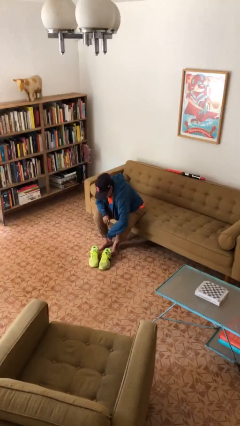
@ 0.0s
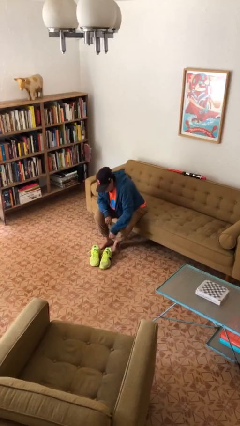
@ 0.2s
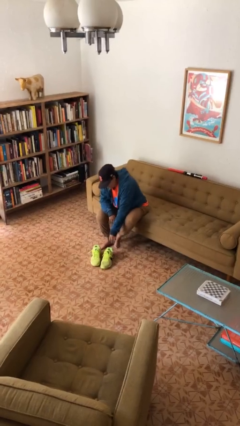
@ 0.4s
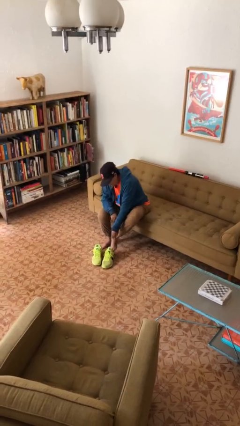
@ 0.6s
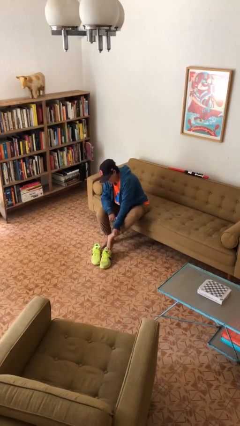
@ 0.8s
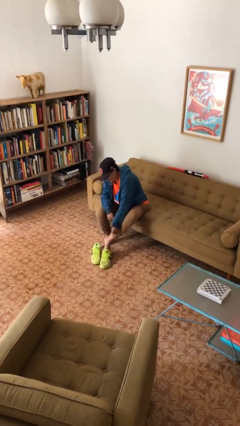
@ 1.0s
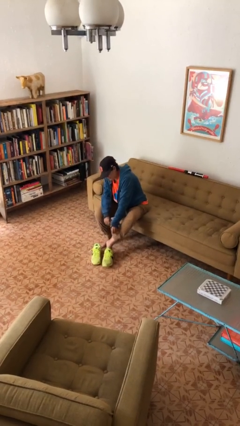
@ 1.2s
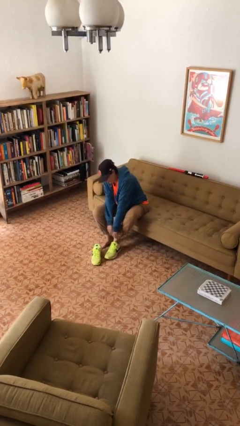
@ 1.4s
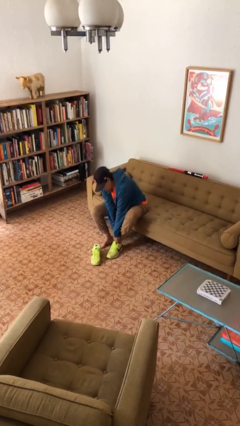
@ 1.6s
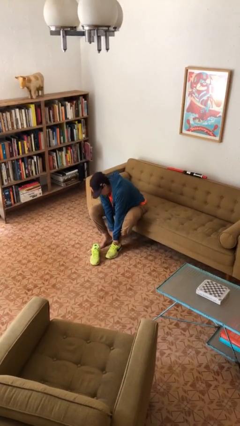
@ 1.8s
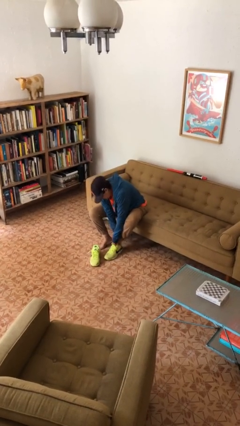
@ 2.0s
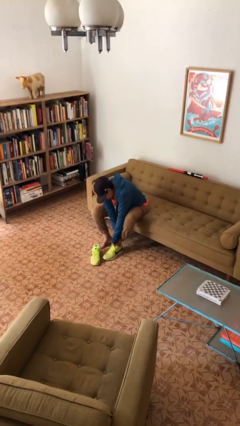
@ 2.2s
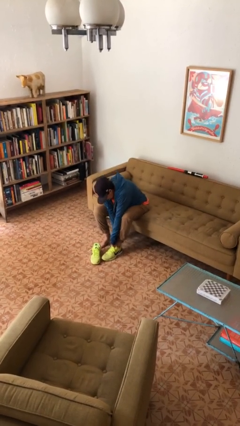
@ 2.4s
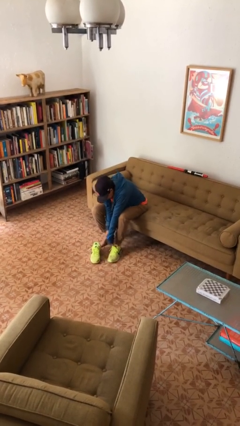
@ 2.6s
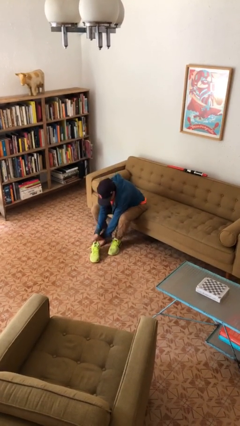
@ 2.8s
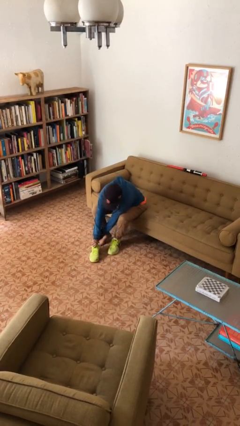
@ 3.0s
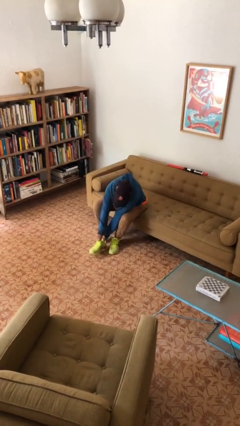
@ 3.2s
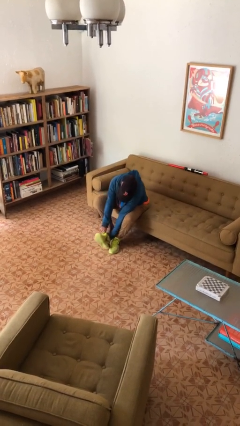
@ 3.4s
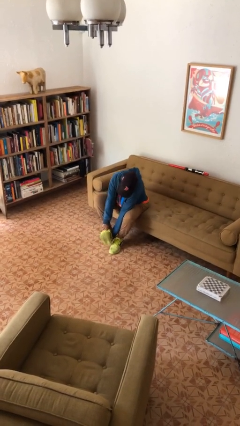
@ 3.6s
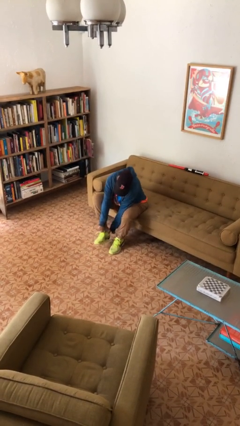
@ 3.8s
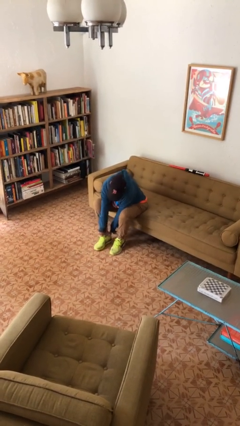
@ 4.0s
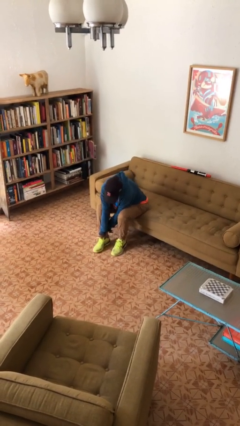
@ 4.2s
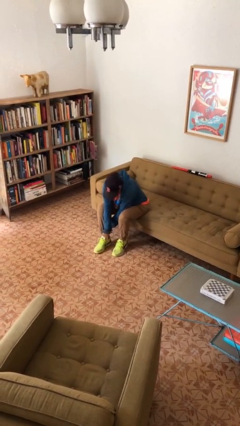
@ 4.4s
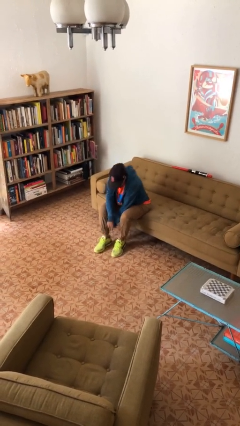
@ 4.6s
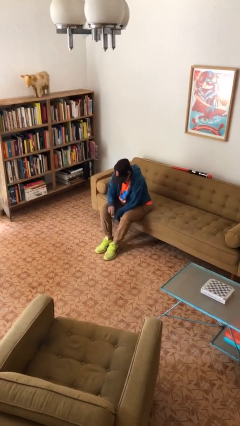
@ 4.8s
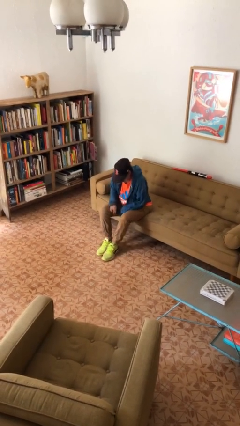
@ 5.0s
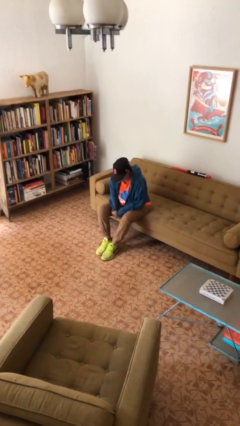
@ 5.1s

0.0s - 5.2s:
person puts on shoes

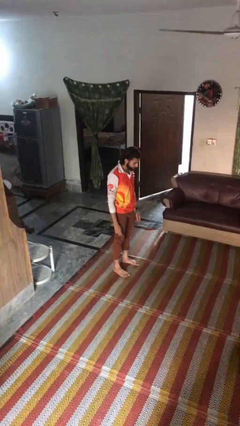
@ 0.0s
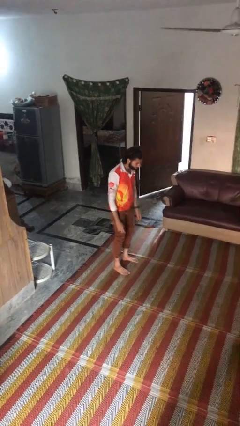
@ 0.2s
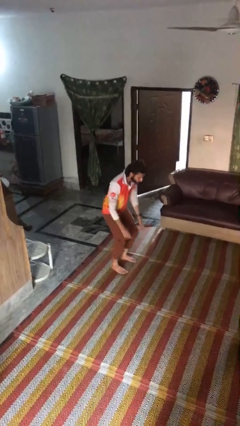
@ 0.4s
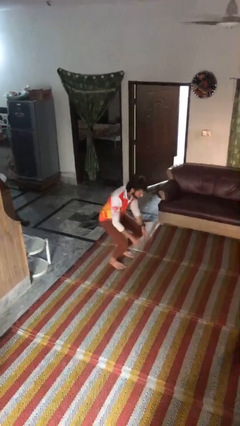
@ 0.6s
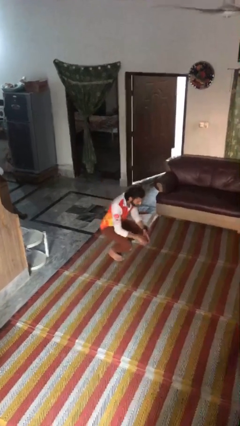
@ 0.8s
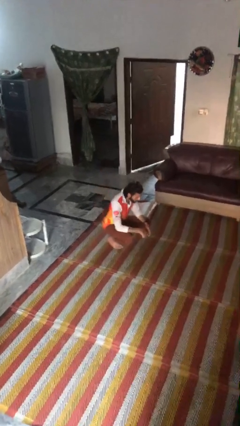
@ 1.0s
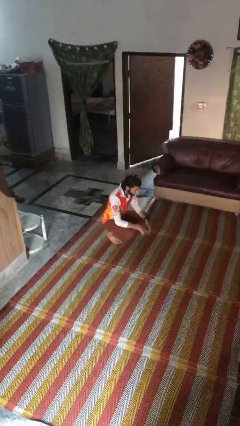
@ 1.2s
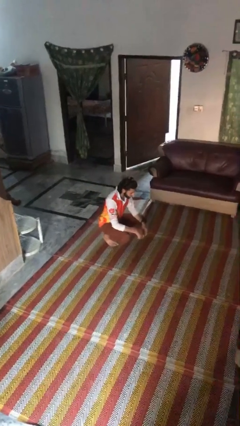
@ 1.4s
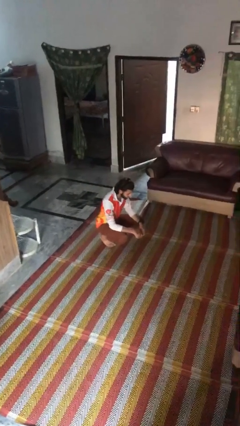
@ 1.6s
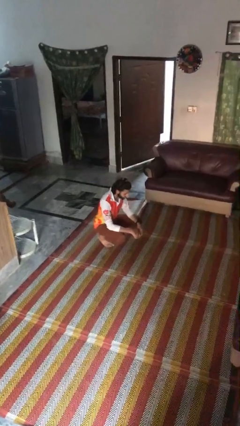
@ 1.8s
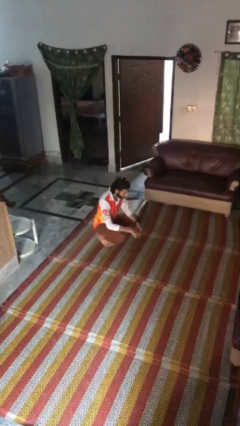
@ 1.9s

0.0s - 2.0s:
person squats

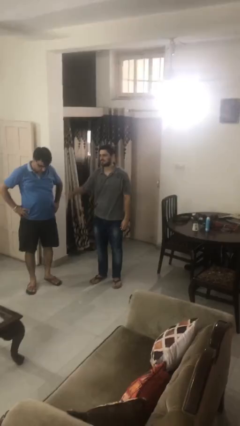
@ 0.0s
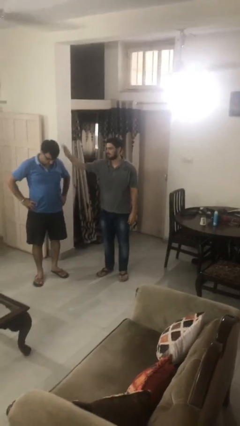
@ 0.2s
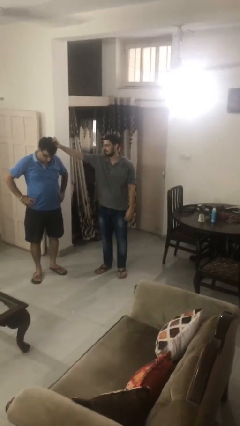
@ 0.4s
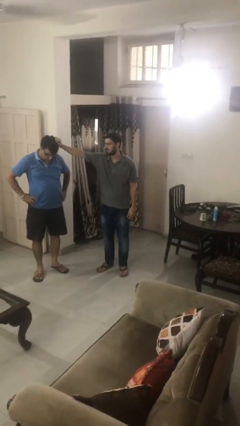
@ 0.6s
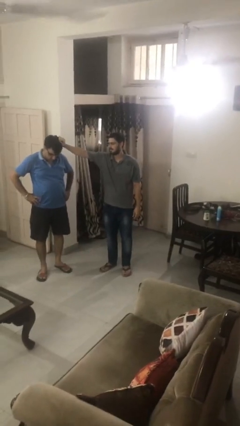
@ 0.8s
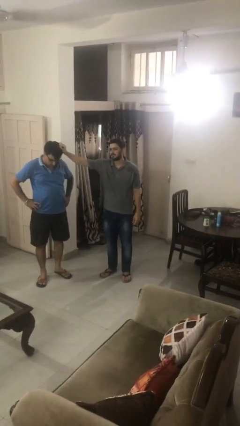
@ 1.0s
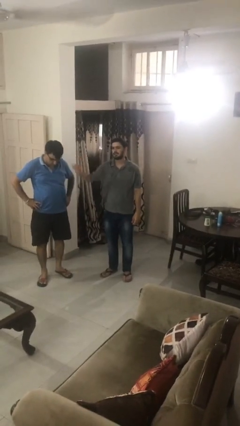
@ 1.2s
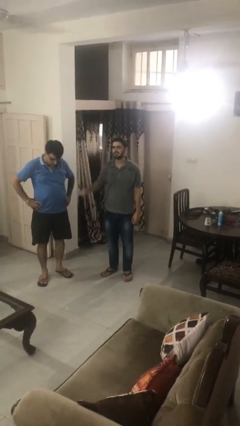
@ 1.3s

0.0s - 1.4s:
person grabs person by hair

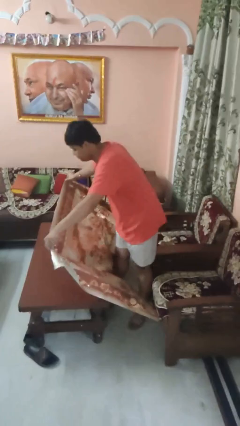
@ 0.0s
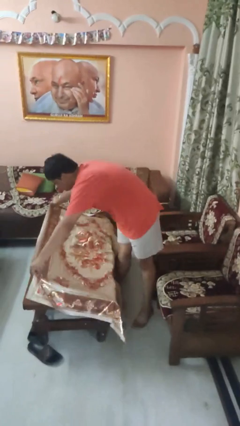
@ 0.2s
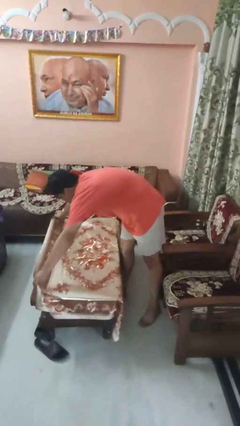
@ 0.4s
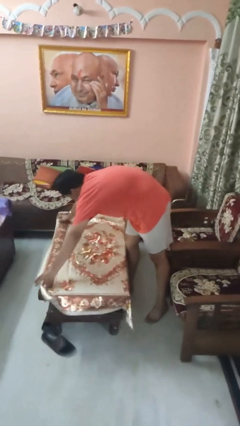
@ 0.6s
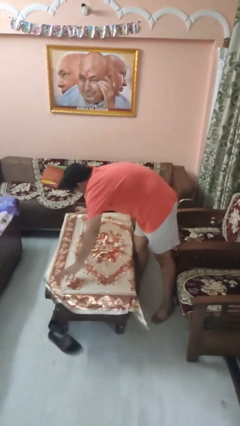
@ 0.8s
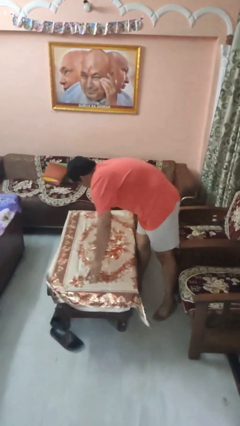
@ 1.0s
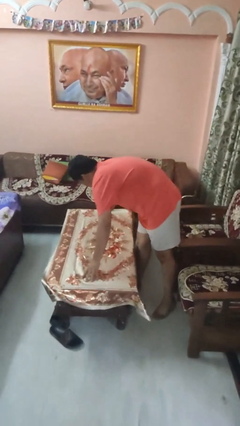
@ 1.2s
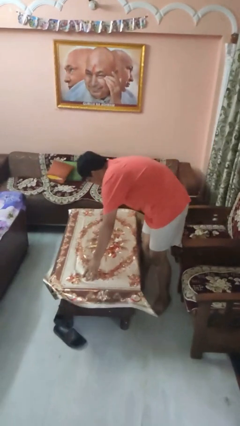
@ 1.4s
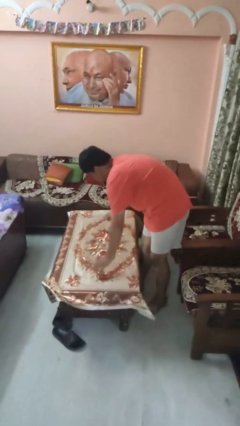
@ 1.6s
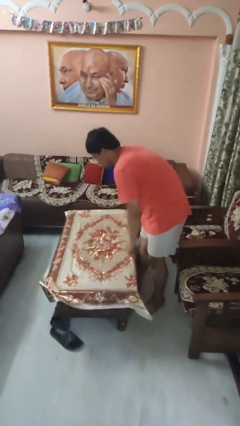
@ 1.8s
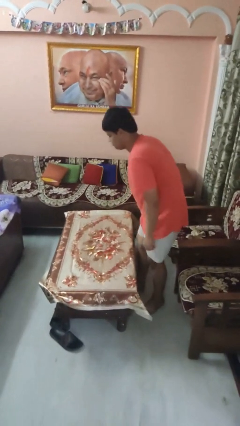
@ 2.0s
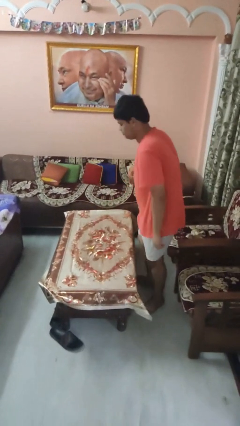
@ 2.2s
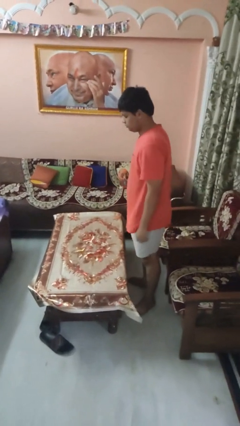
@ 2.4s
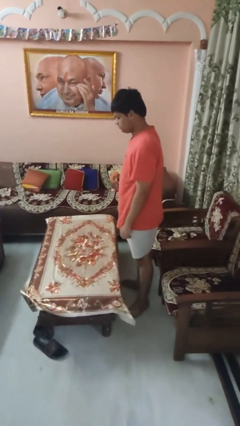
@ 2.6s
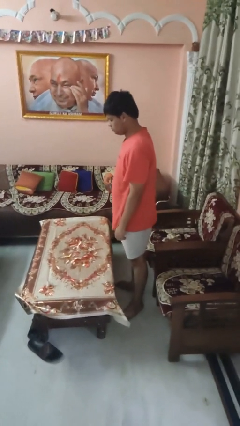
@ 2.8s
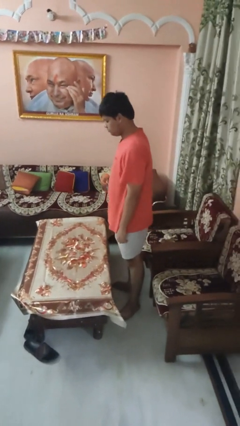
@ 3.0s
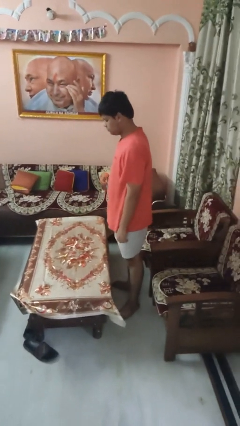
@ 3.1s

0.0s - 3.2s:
person spreads tablecloth

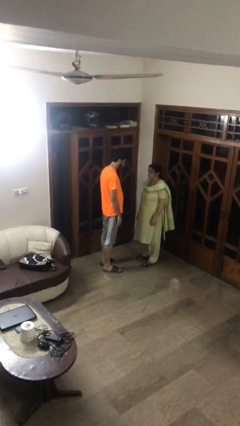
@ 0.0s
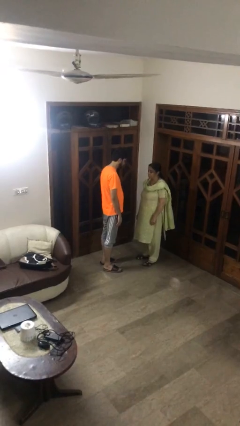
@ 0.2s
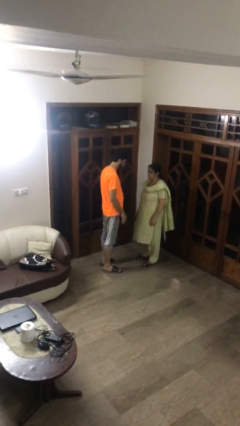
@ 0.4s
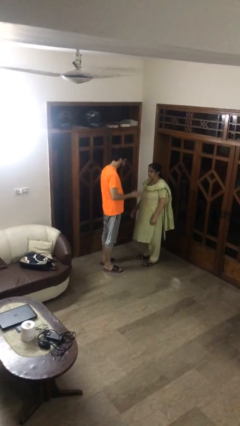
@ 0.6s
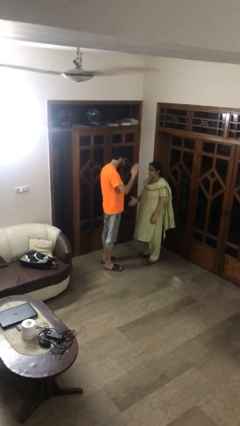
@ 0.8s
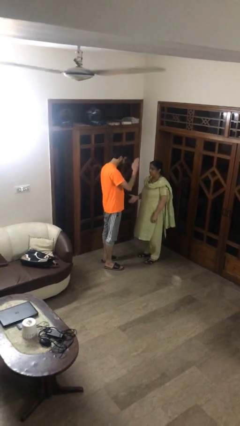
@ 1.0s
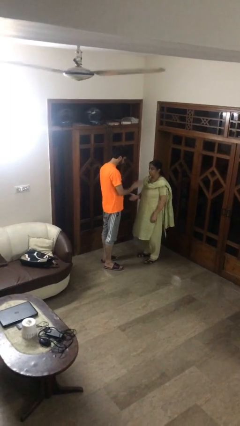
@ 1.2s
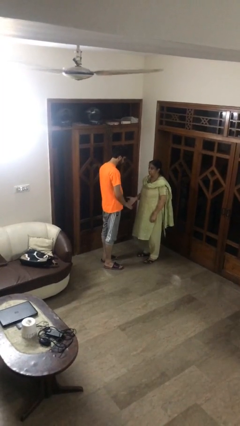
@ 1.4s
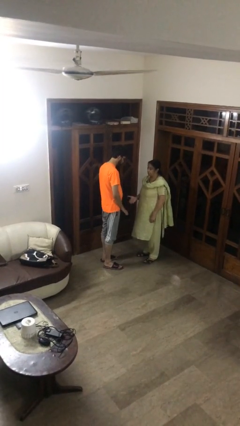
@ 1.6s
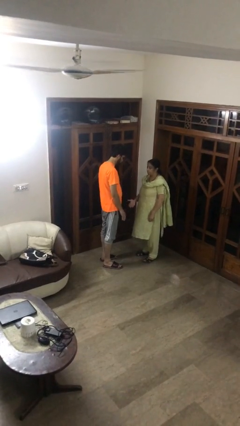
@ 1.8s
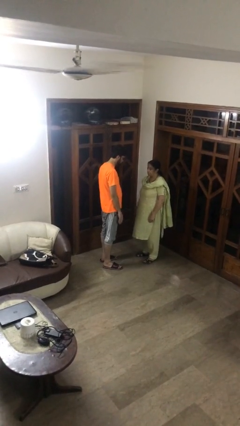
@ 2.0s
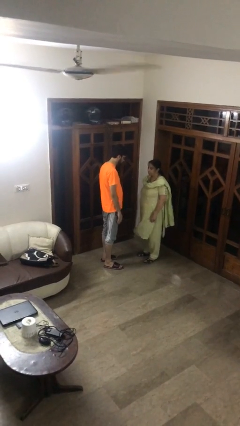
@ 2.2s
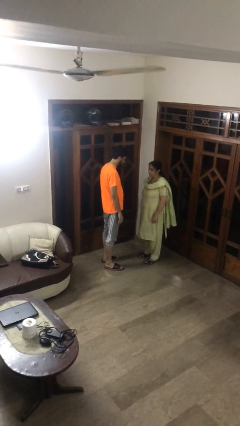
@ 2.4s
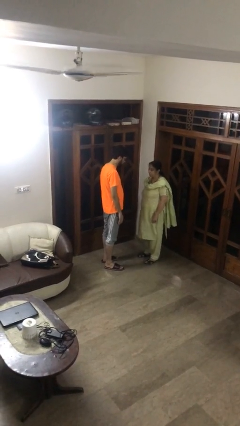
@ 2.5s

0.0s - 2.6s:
person highfives hand

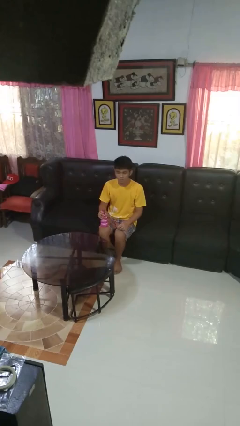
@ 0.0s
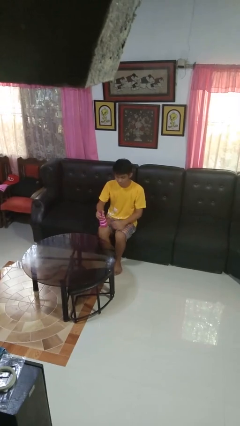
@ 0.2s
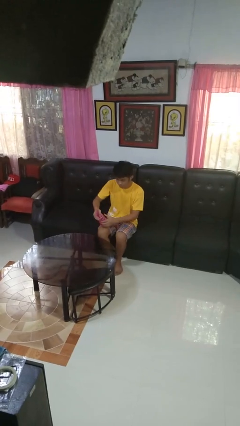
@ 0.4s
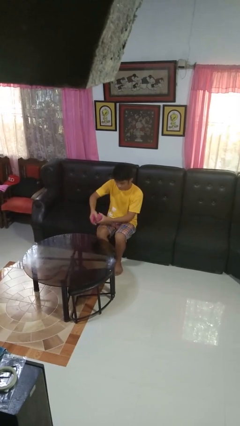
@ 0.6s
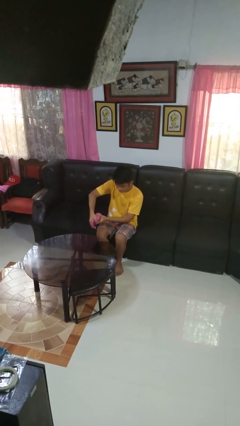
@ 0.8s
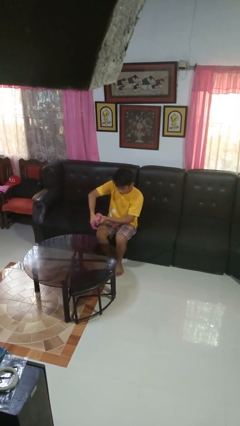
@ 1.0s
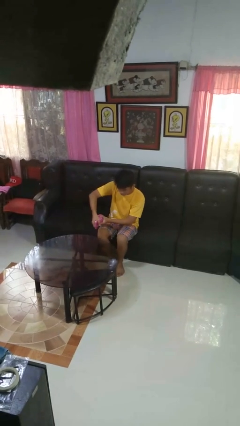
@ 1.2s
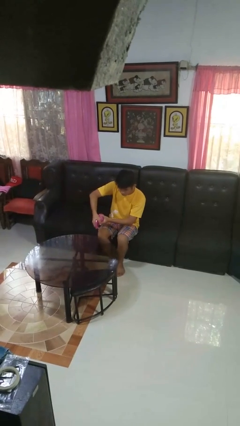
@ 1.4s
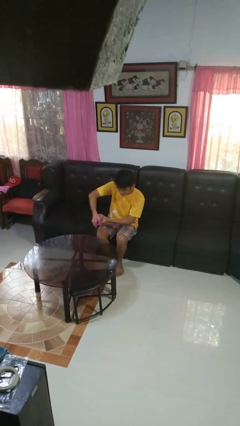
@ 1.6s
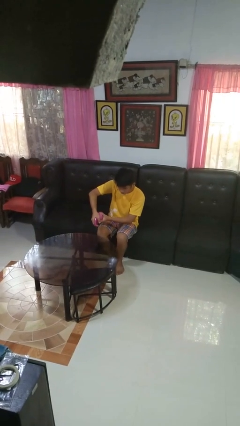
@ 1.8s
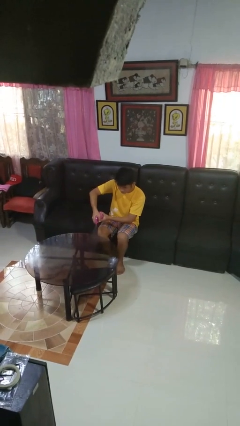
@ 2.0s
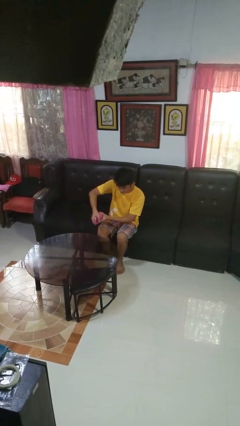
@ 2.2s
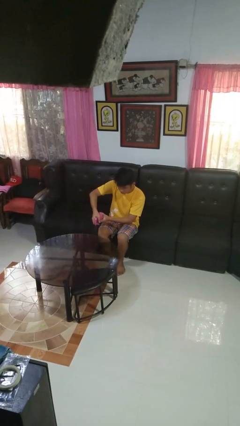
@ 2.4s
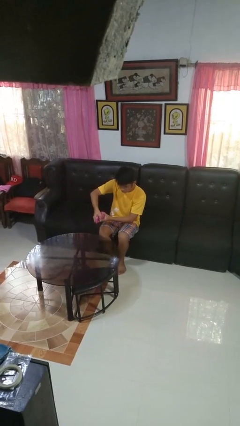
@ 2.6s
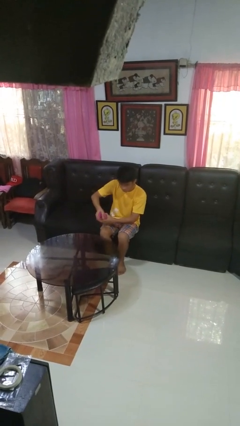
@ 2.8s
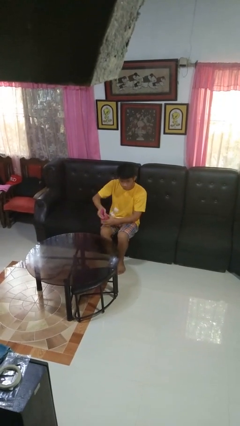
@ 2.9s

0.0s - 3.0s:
person sprays from bottle
